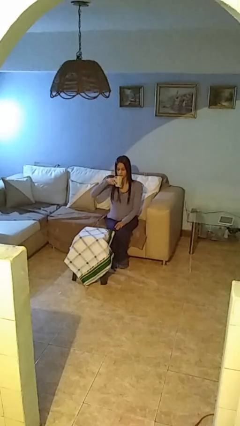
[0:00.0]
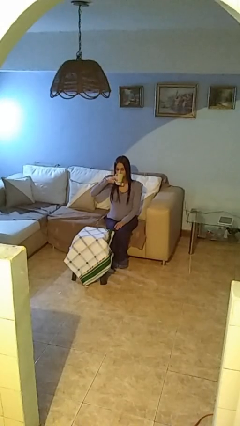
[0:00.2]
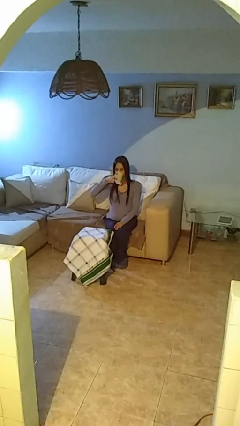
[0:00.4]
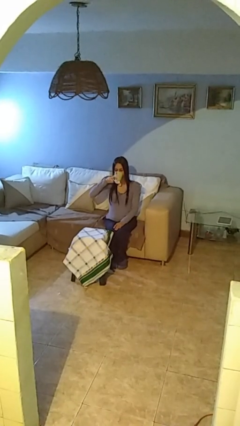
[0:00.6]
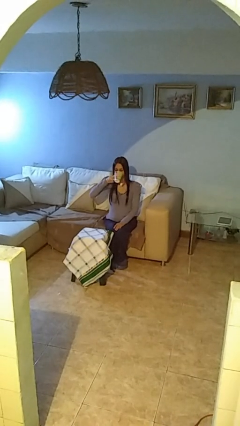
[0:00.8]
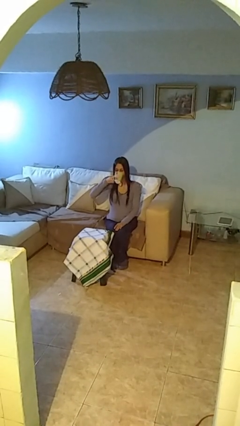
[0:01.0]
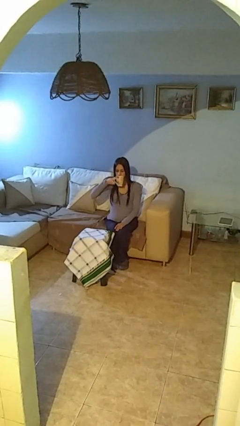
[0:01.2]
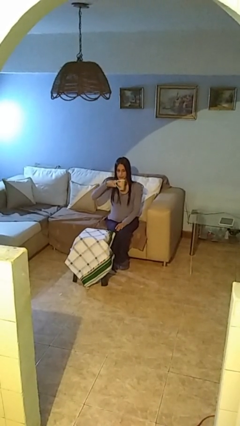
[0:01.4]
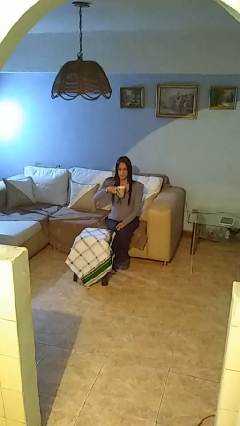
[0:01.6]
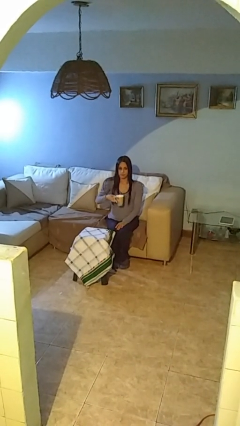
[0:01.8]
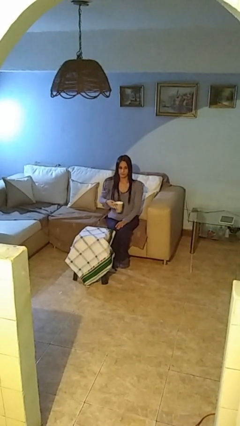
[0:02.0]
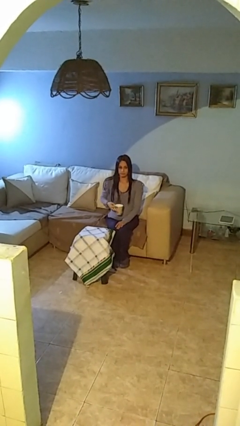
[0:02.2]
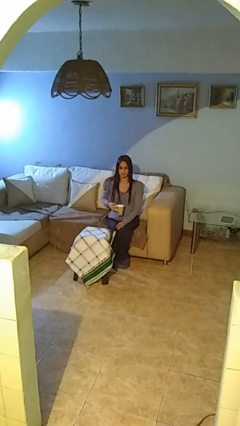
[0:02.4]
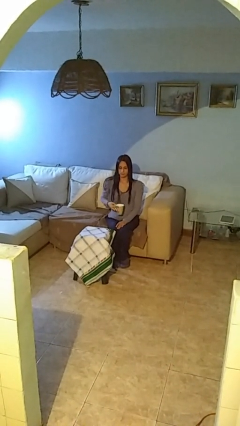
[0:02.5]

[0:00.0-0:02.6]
person drinks from mug

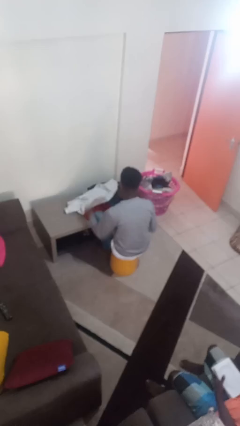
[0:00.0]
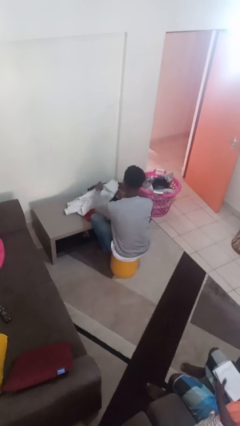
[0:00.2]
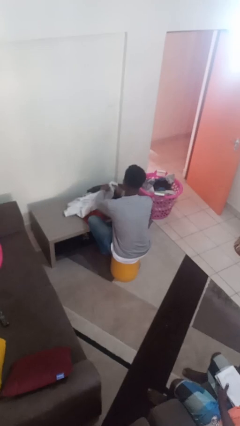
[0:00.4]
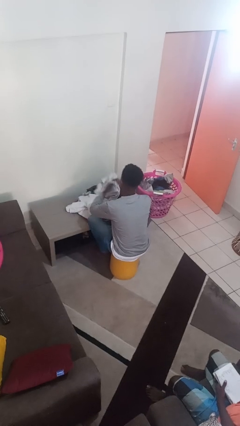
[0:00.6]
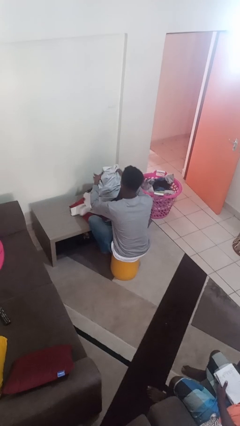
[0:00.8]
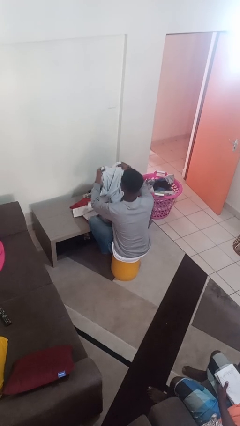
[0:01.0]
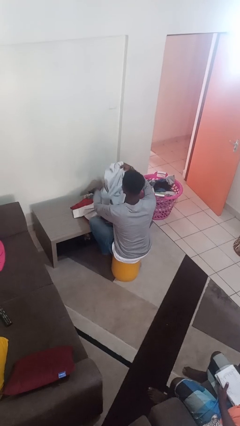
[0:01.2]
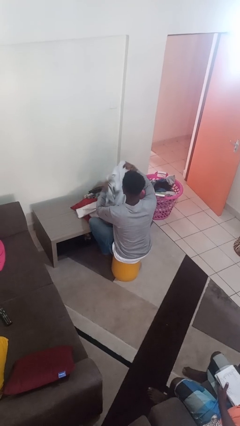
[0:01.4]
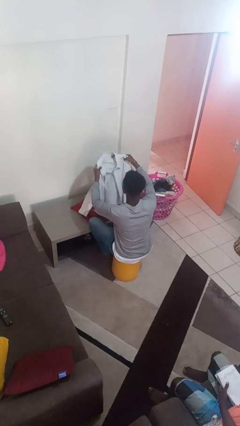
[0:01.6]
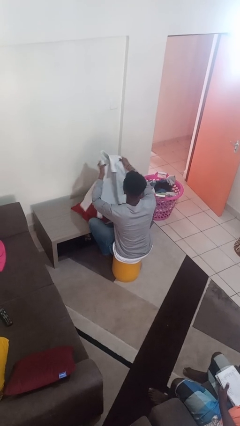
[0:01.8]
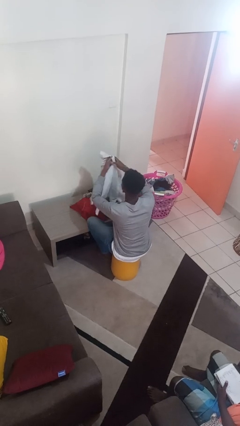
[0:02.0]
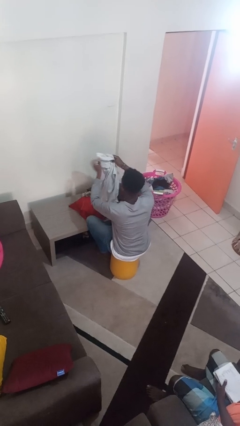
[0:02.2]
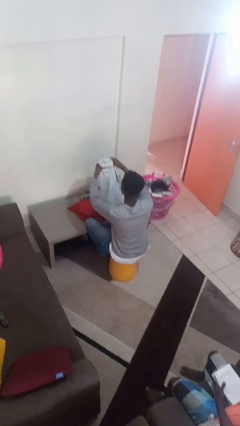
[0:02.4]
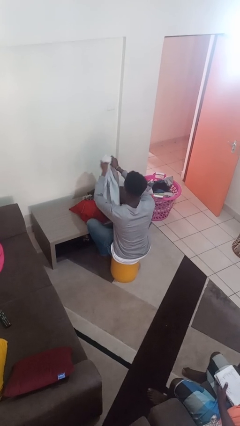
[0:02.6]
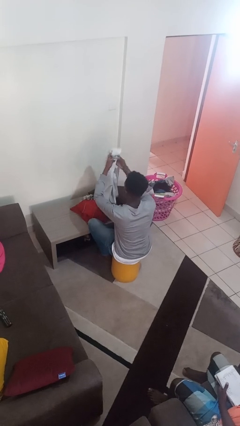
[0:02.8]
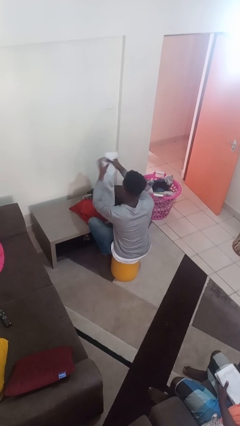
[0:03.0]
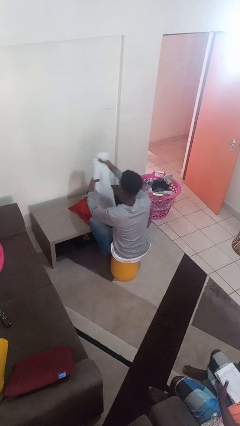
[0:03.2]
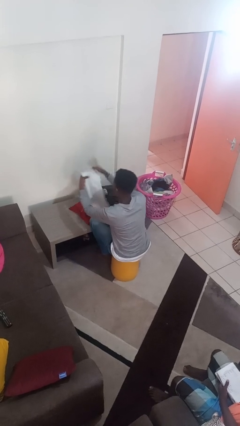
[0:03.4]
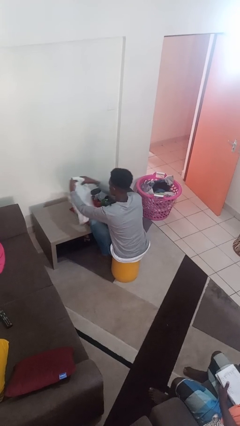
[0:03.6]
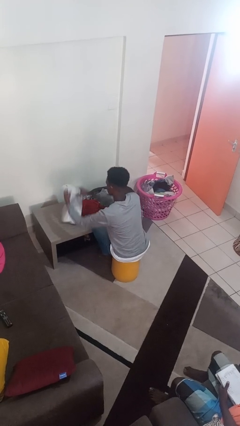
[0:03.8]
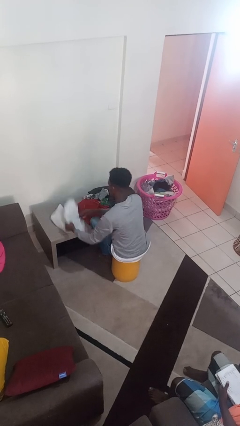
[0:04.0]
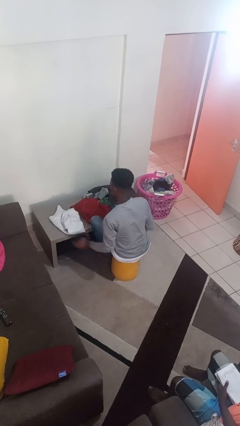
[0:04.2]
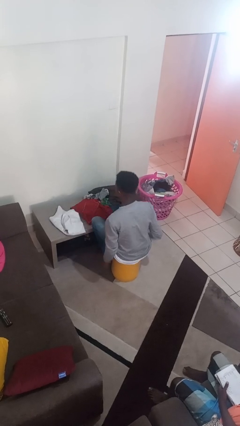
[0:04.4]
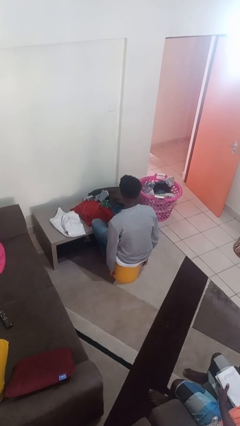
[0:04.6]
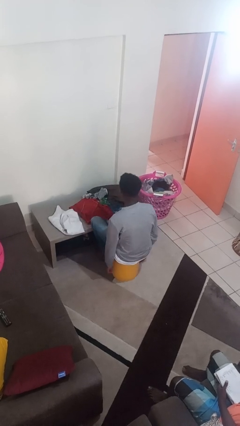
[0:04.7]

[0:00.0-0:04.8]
person folds shirt

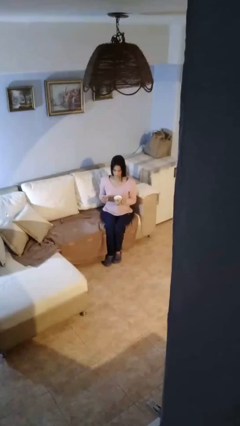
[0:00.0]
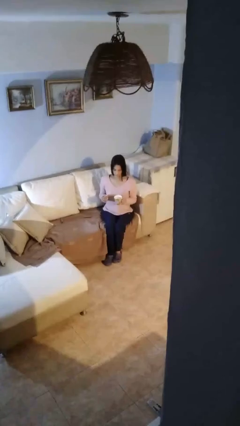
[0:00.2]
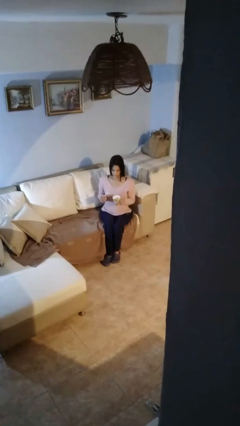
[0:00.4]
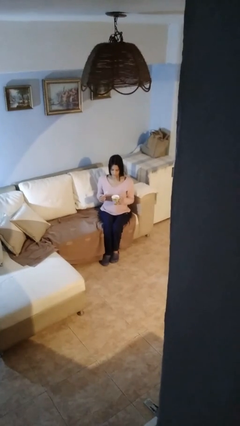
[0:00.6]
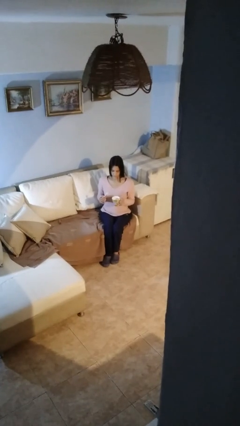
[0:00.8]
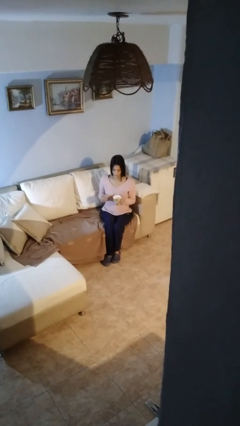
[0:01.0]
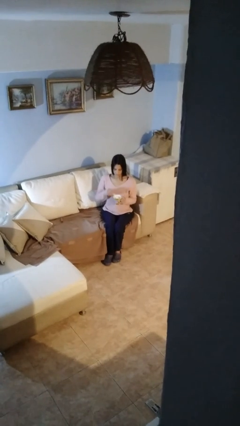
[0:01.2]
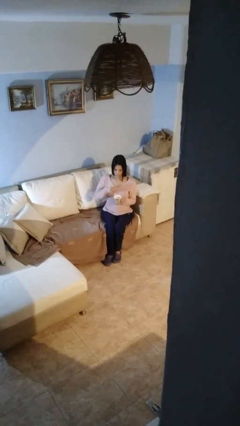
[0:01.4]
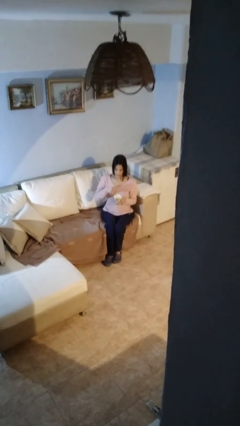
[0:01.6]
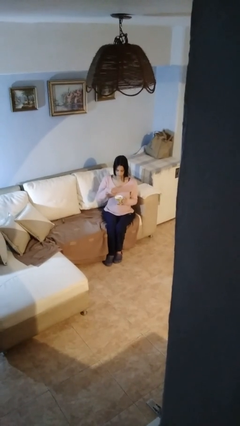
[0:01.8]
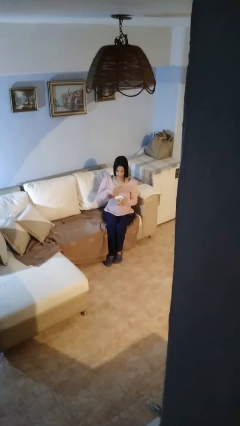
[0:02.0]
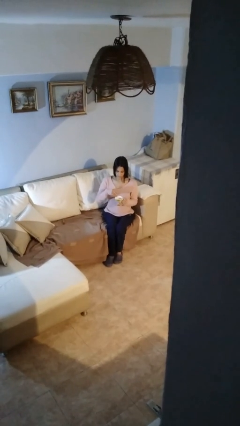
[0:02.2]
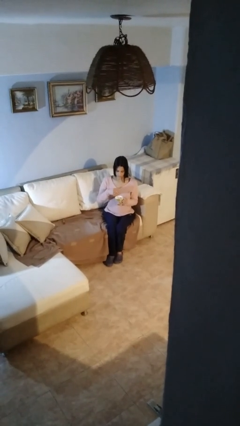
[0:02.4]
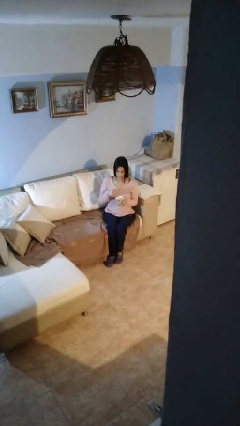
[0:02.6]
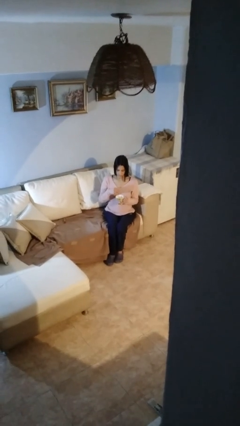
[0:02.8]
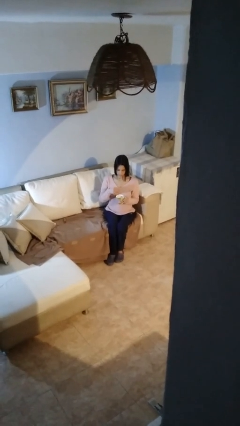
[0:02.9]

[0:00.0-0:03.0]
person stirs mug

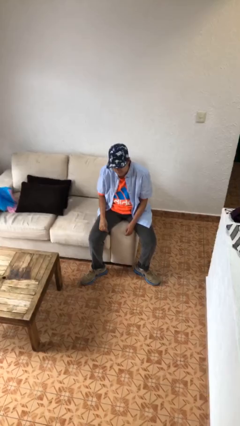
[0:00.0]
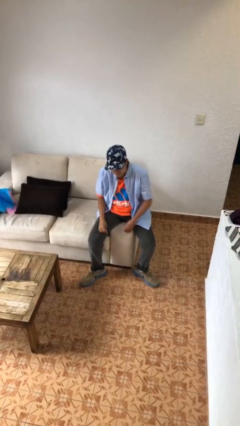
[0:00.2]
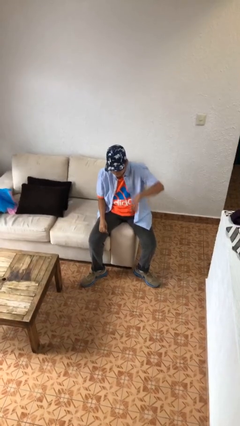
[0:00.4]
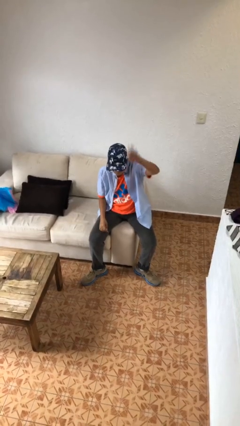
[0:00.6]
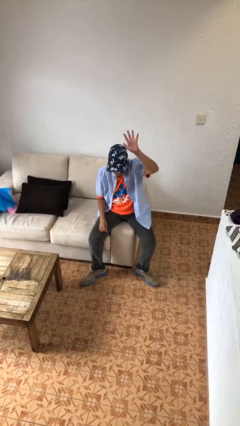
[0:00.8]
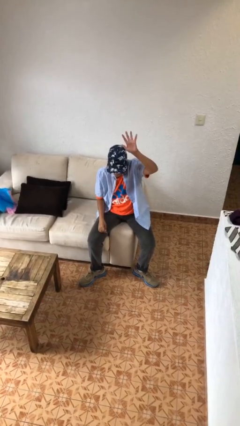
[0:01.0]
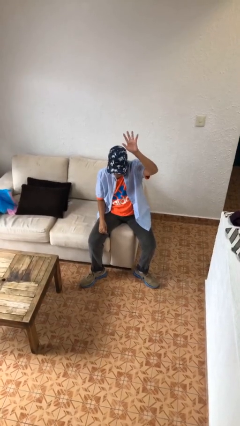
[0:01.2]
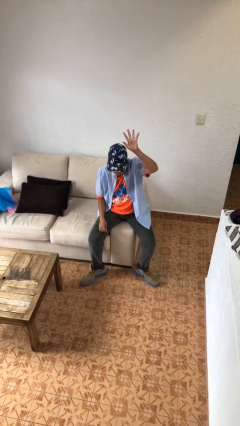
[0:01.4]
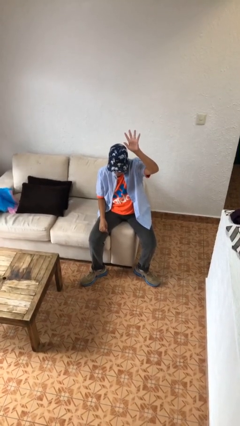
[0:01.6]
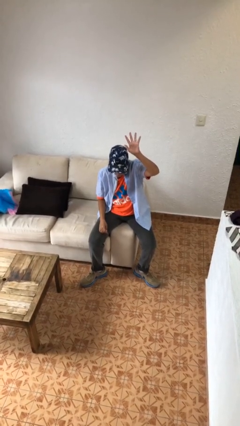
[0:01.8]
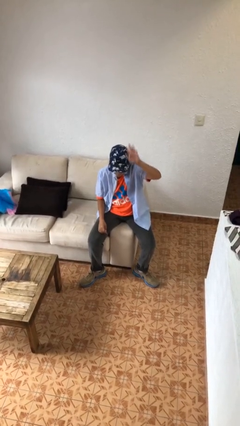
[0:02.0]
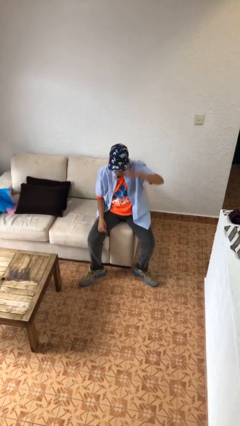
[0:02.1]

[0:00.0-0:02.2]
person gestures number five

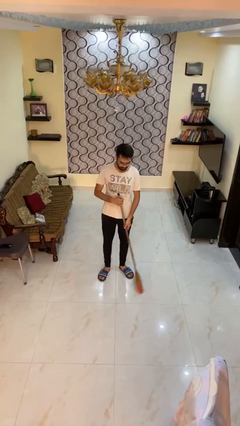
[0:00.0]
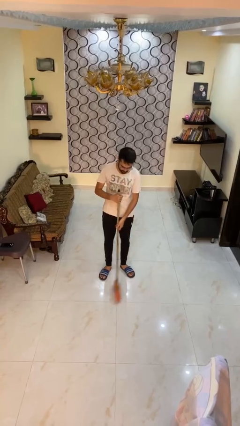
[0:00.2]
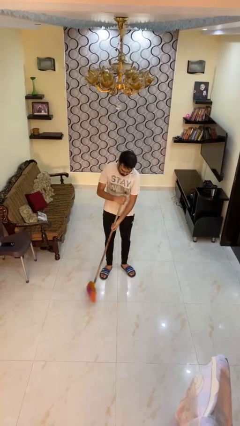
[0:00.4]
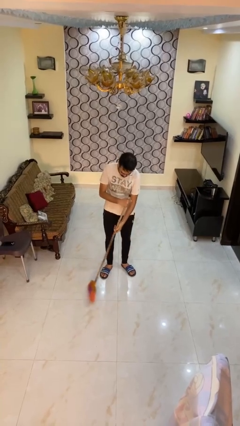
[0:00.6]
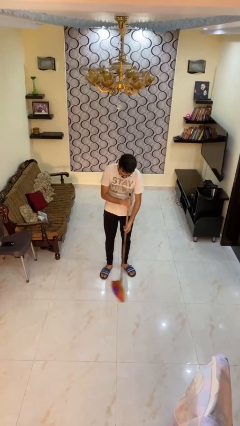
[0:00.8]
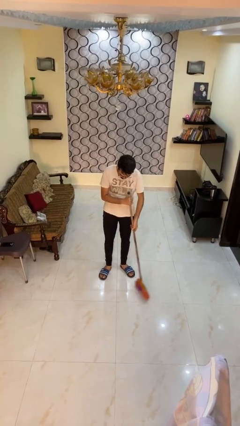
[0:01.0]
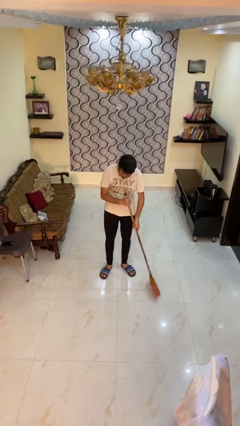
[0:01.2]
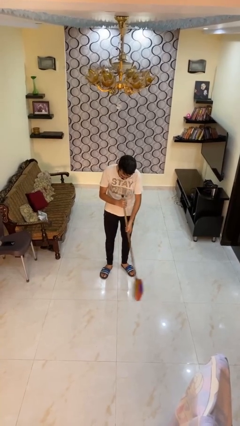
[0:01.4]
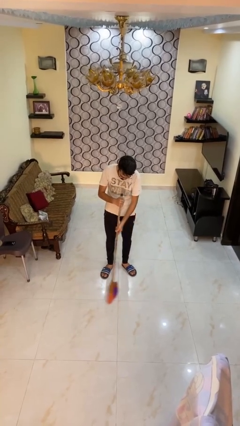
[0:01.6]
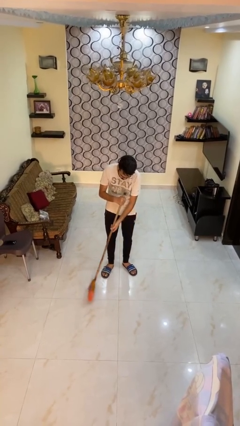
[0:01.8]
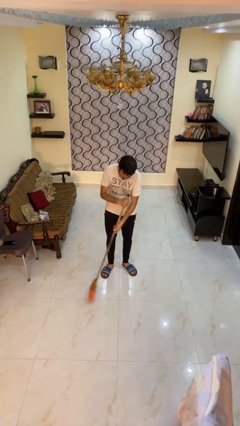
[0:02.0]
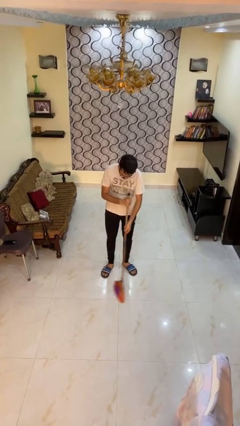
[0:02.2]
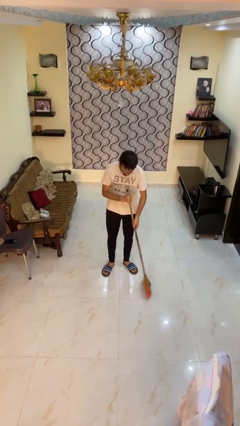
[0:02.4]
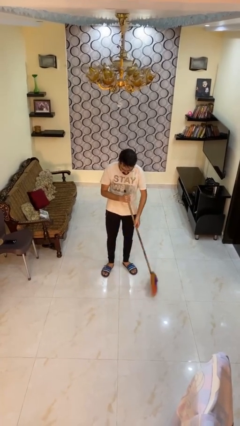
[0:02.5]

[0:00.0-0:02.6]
person mops

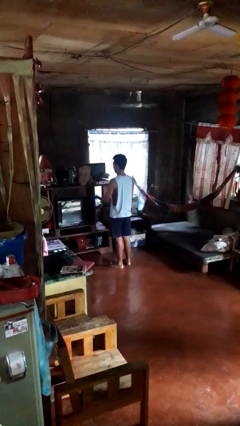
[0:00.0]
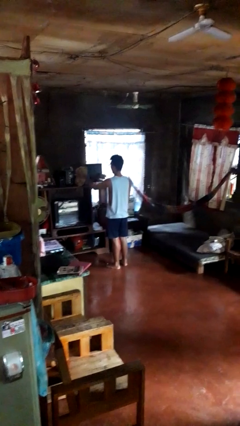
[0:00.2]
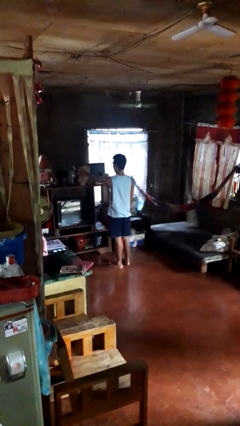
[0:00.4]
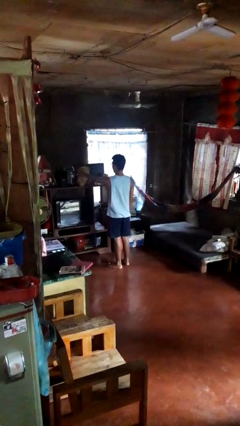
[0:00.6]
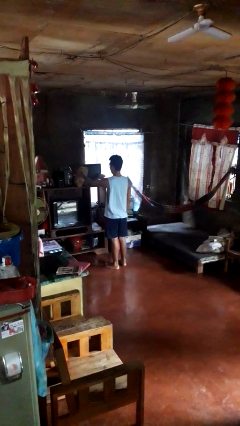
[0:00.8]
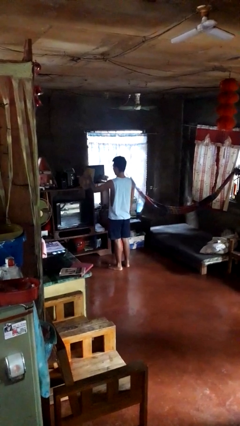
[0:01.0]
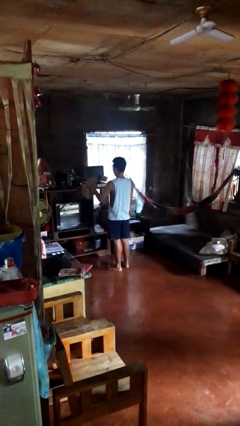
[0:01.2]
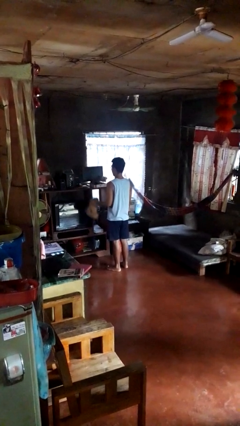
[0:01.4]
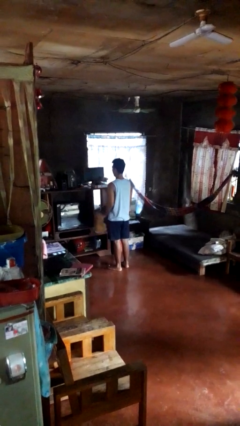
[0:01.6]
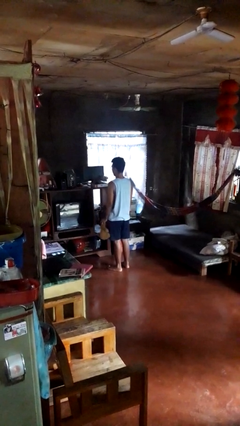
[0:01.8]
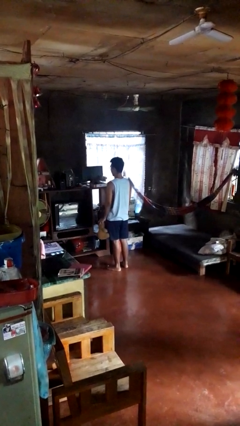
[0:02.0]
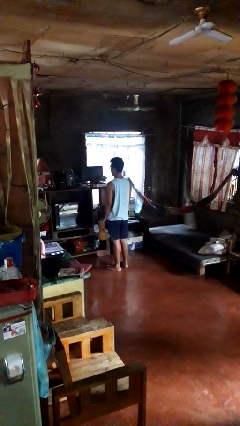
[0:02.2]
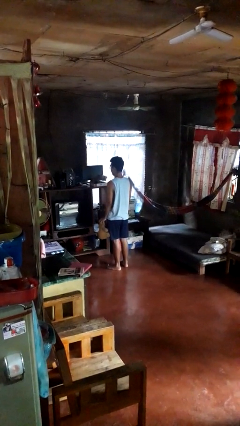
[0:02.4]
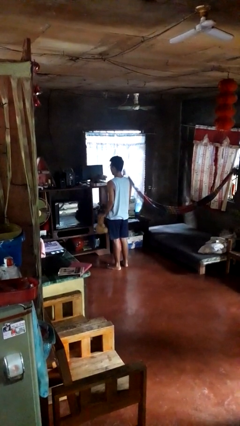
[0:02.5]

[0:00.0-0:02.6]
person picks up object from shelf
